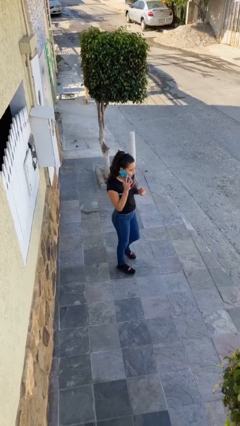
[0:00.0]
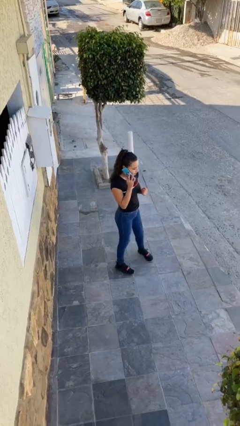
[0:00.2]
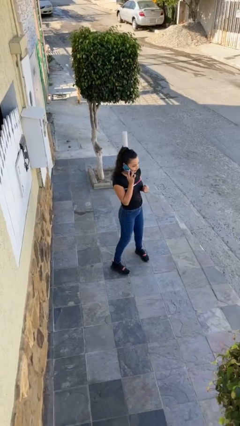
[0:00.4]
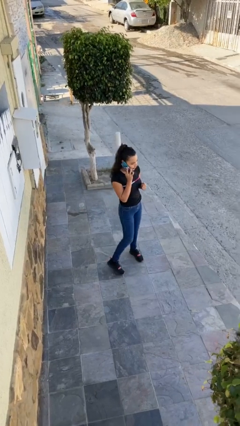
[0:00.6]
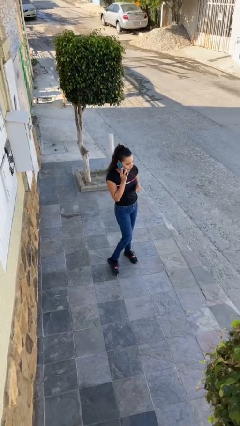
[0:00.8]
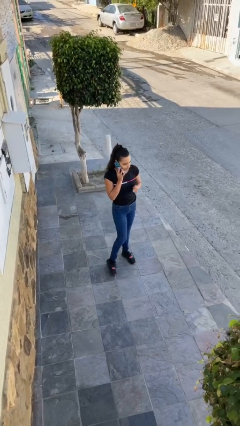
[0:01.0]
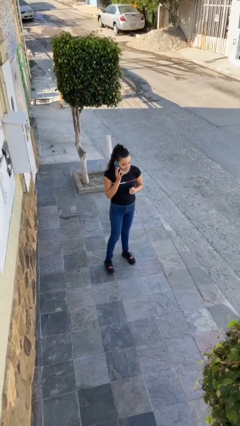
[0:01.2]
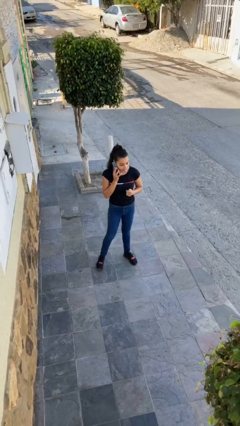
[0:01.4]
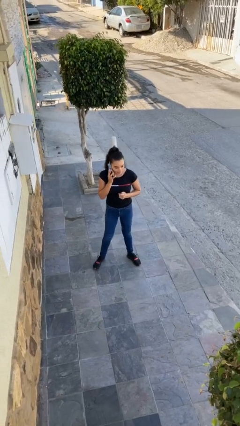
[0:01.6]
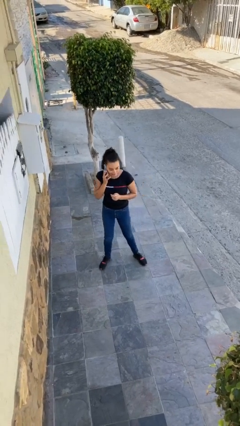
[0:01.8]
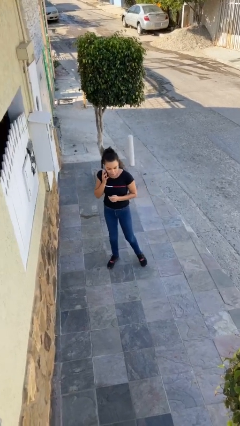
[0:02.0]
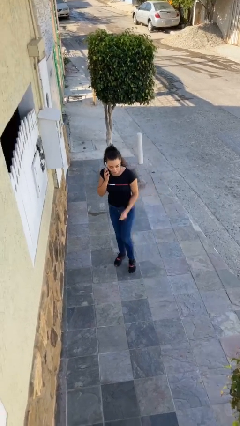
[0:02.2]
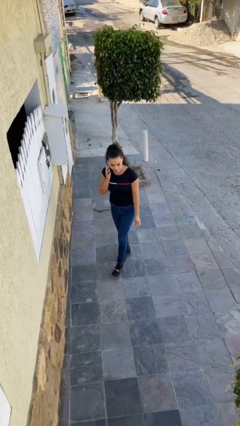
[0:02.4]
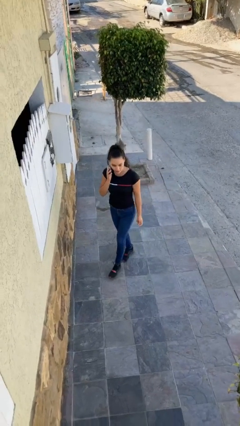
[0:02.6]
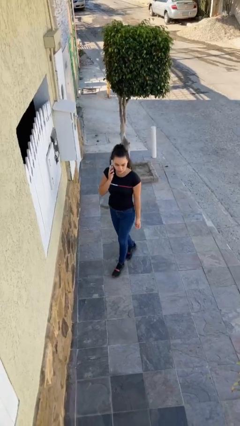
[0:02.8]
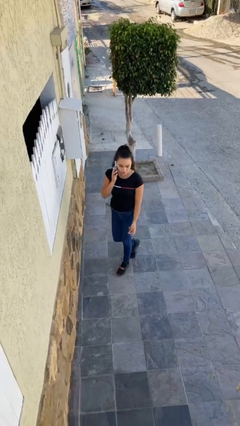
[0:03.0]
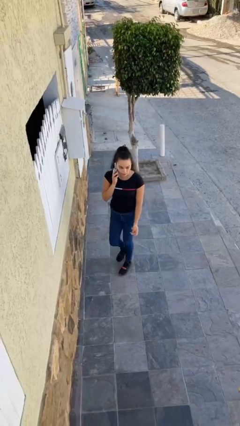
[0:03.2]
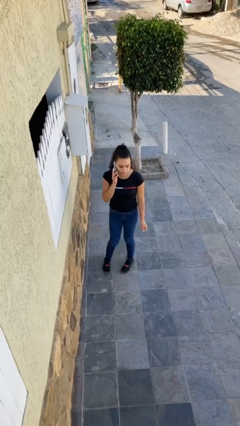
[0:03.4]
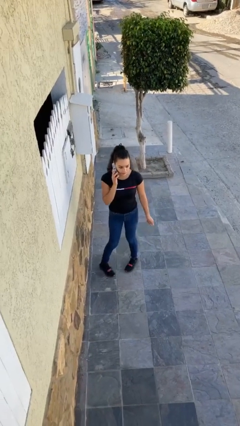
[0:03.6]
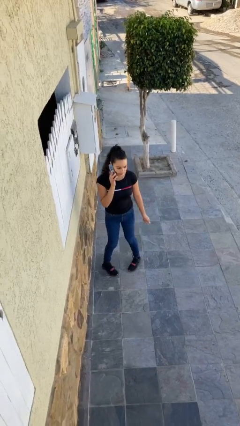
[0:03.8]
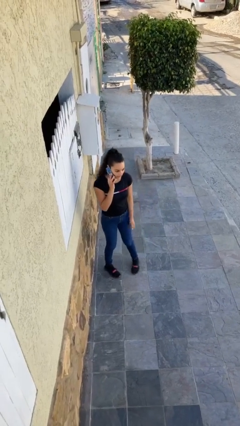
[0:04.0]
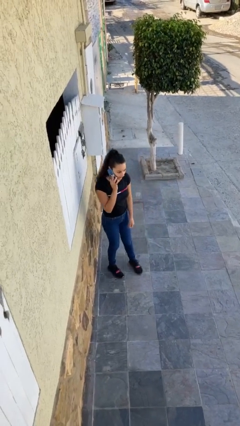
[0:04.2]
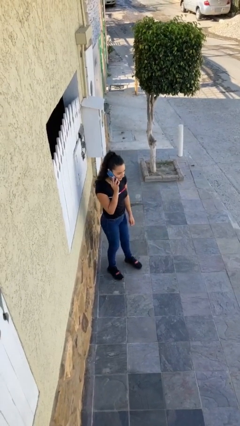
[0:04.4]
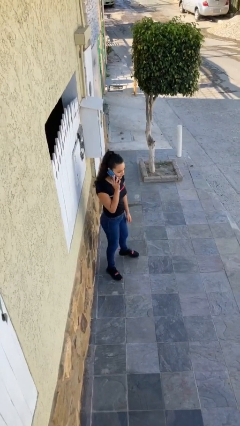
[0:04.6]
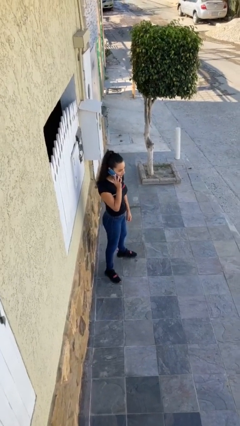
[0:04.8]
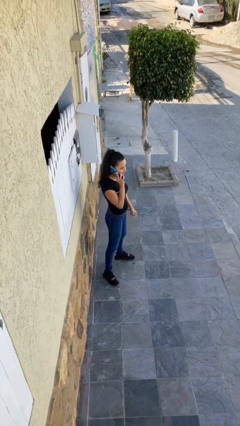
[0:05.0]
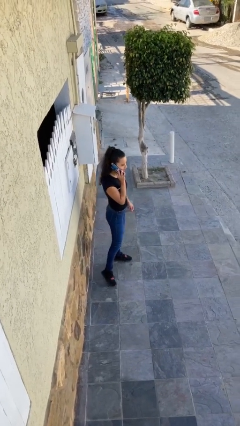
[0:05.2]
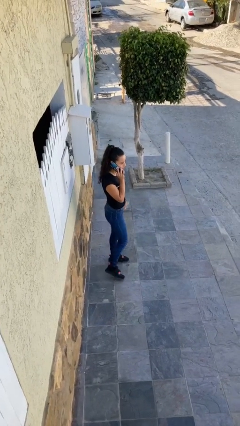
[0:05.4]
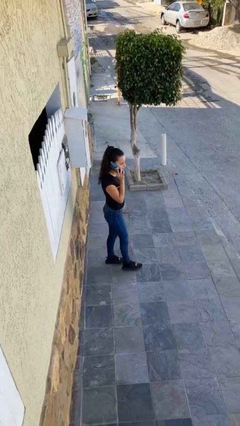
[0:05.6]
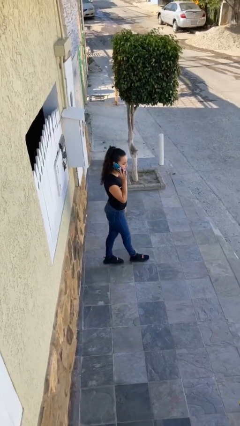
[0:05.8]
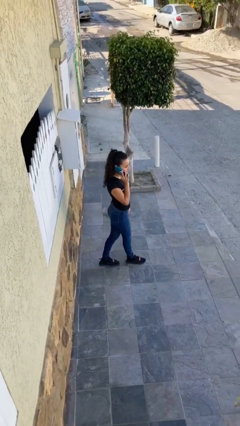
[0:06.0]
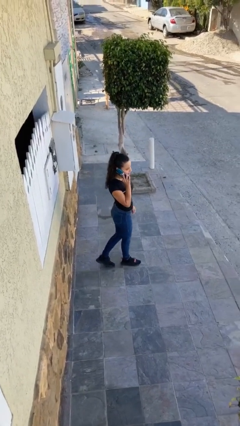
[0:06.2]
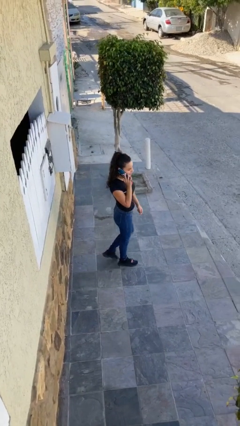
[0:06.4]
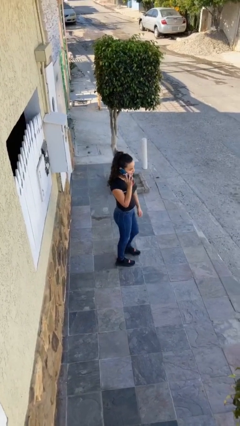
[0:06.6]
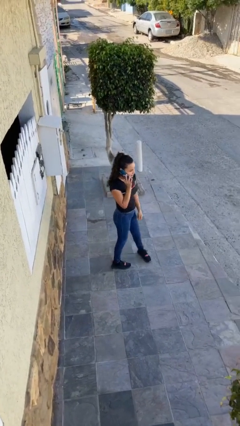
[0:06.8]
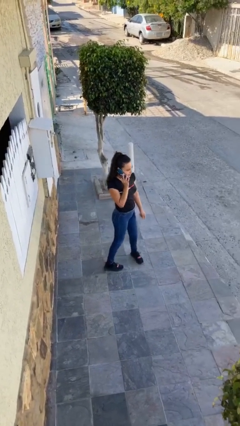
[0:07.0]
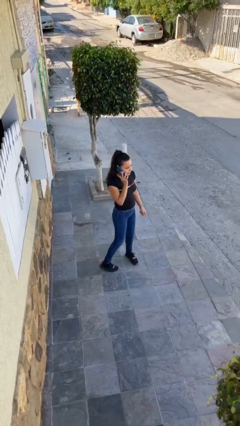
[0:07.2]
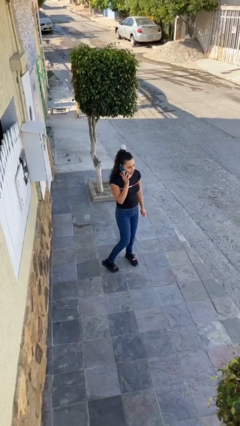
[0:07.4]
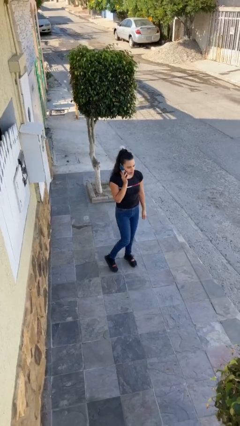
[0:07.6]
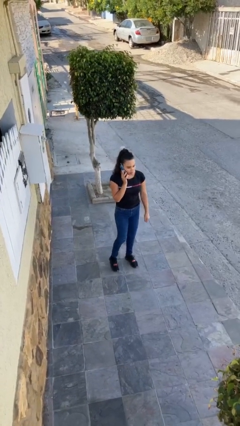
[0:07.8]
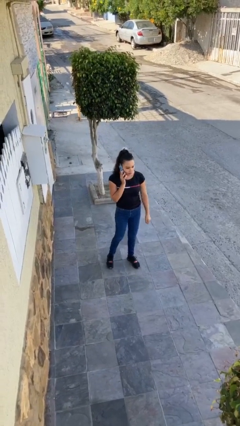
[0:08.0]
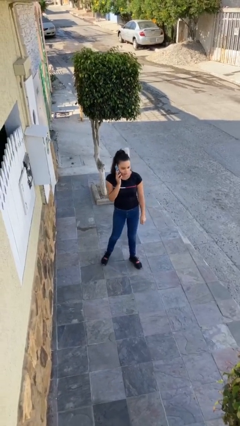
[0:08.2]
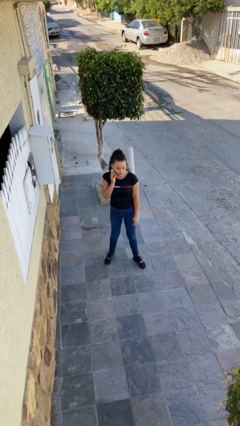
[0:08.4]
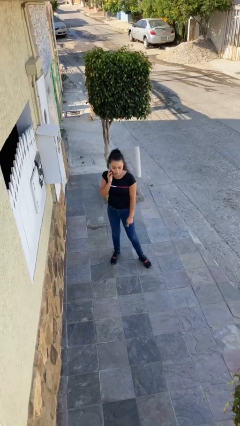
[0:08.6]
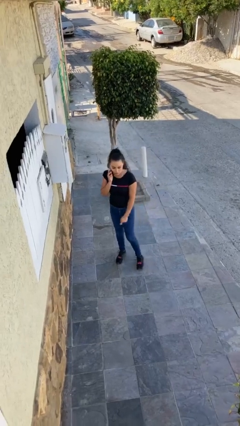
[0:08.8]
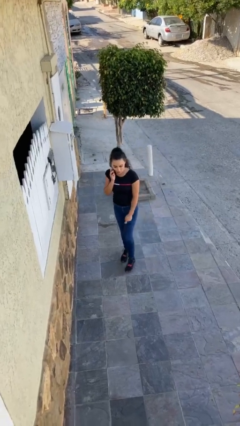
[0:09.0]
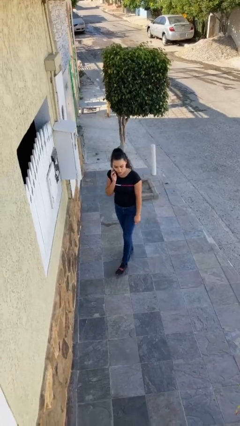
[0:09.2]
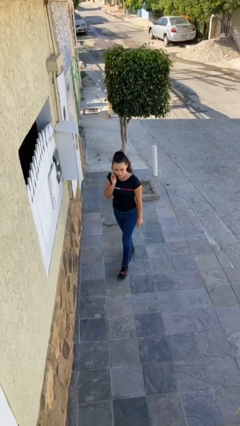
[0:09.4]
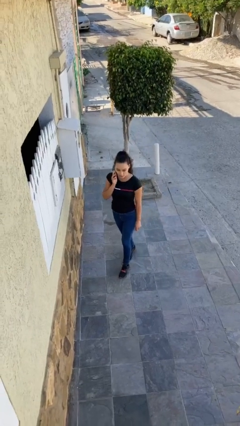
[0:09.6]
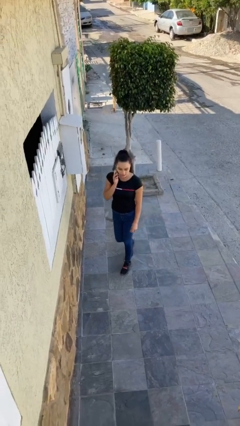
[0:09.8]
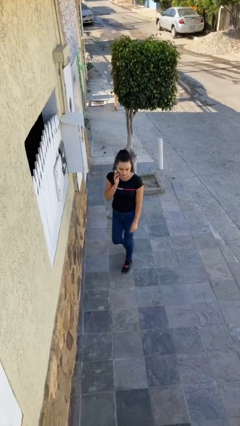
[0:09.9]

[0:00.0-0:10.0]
person talks on phone

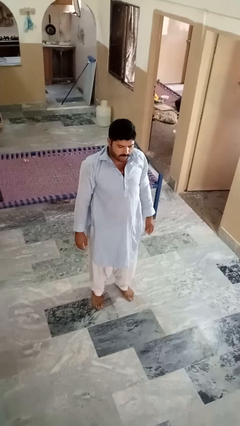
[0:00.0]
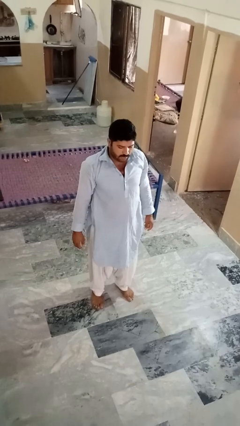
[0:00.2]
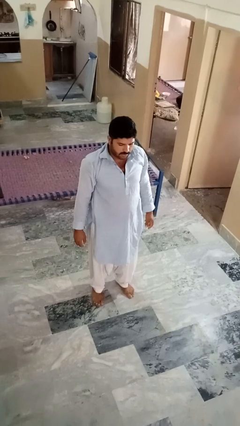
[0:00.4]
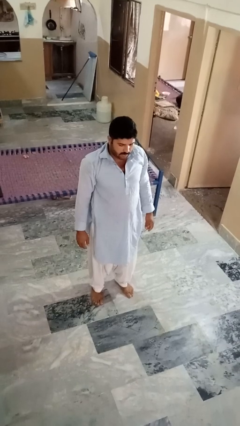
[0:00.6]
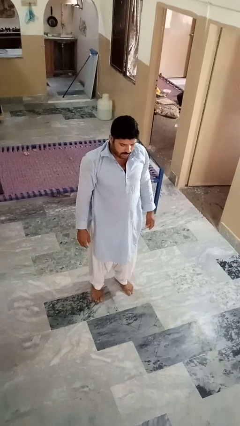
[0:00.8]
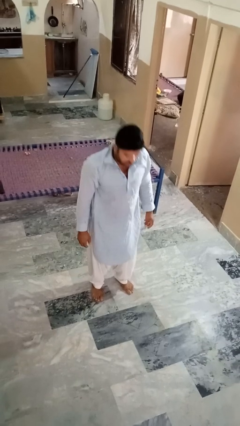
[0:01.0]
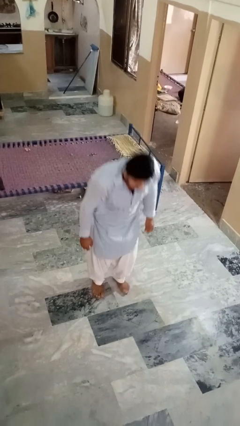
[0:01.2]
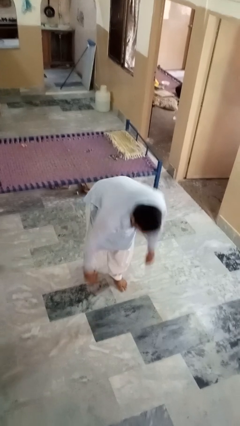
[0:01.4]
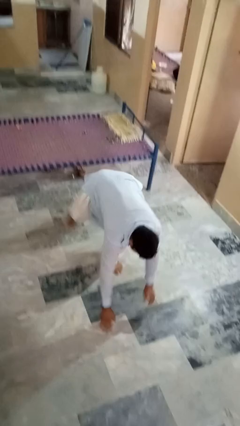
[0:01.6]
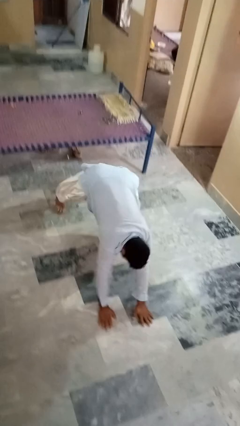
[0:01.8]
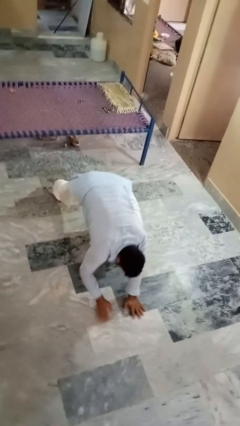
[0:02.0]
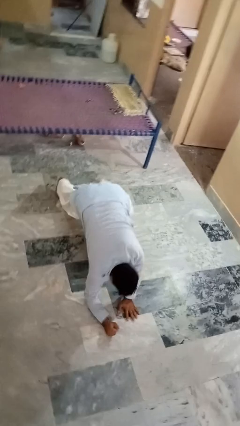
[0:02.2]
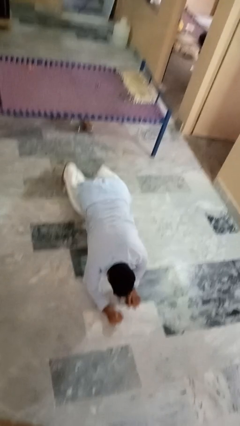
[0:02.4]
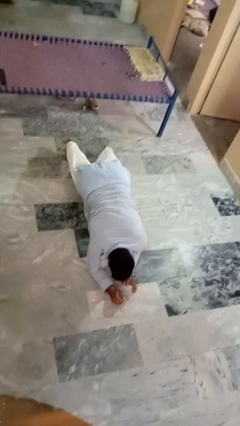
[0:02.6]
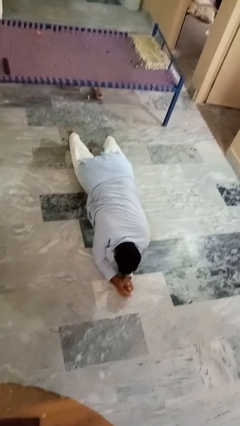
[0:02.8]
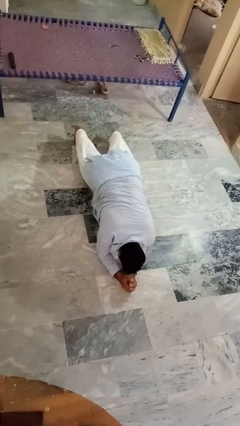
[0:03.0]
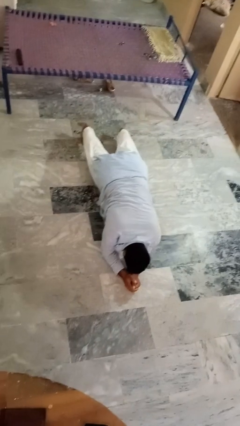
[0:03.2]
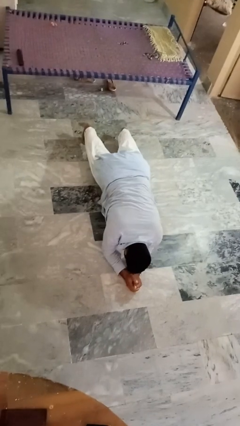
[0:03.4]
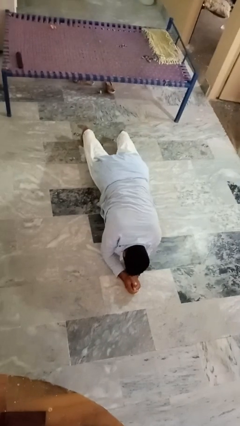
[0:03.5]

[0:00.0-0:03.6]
person exercises with plank

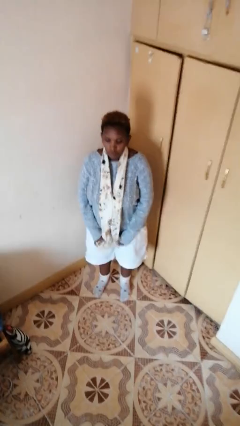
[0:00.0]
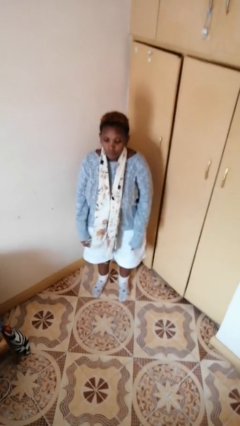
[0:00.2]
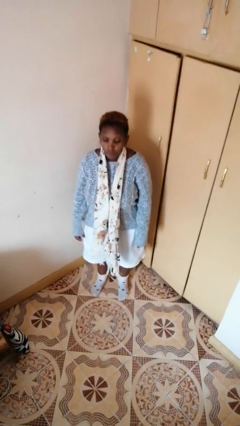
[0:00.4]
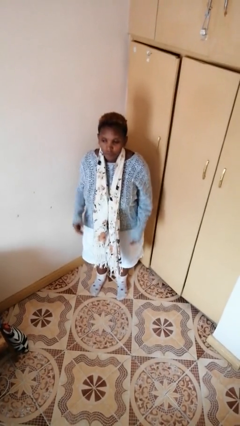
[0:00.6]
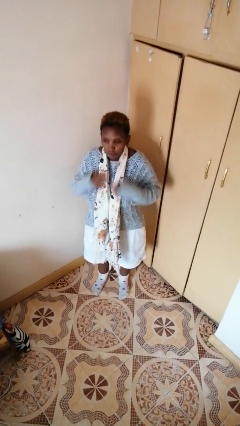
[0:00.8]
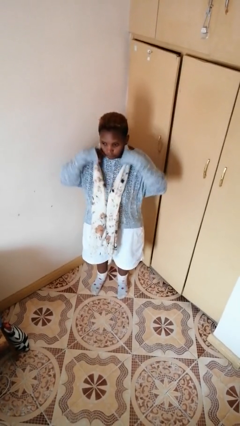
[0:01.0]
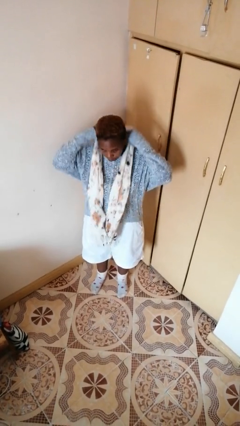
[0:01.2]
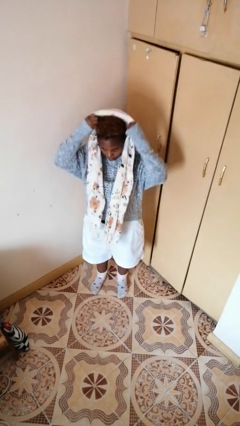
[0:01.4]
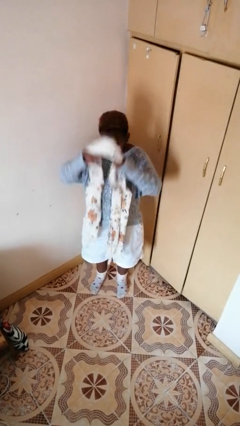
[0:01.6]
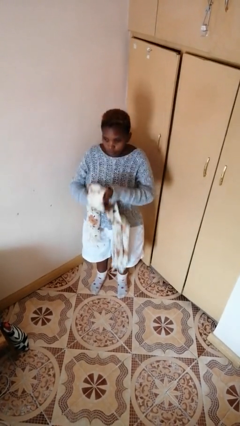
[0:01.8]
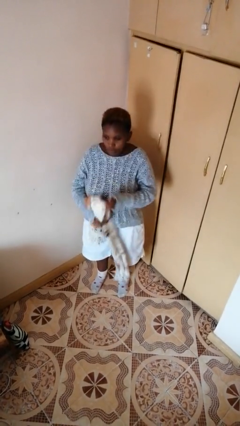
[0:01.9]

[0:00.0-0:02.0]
person takes off scarf

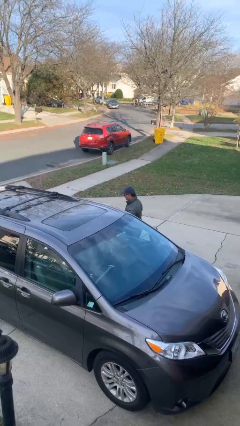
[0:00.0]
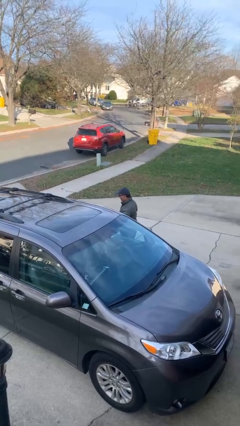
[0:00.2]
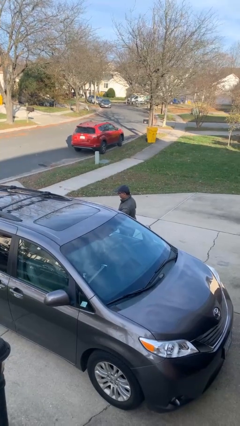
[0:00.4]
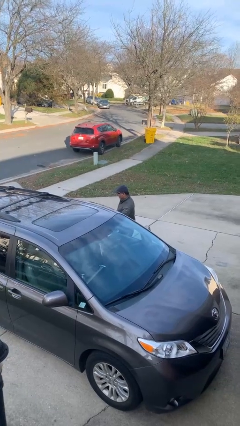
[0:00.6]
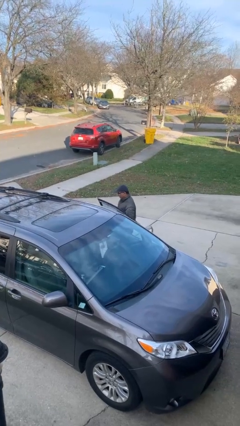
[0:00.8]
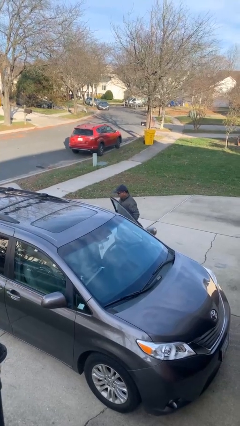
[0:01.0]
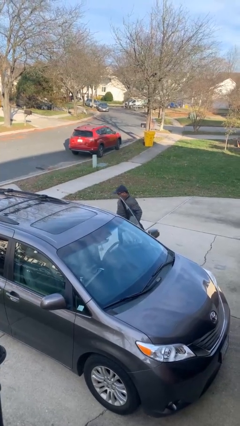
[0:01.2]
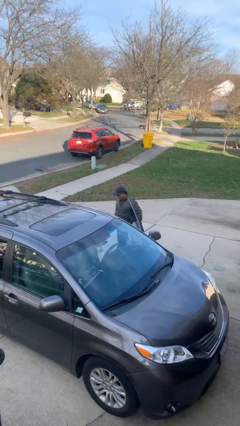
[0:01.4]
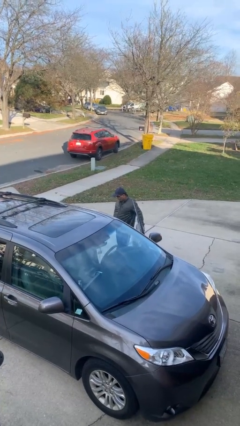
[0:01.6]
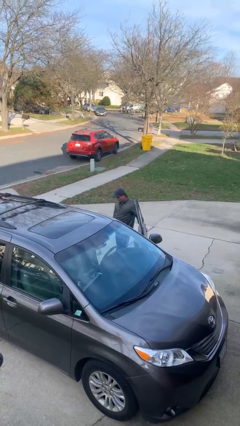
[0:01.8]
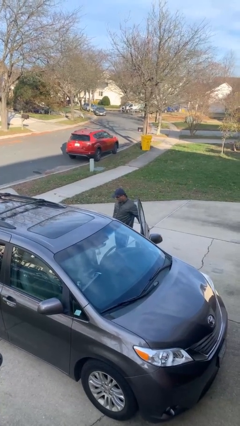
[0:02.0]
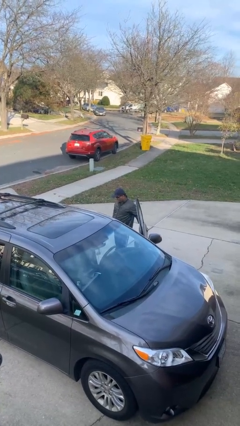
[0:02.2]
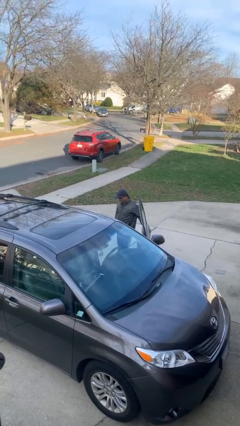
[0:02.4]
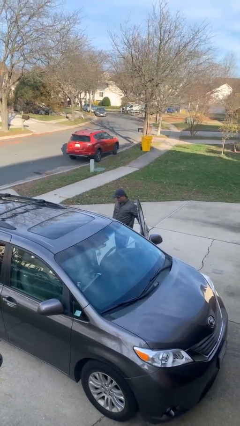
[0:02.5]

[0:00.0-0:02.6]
person opens car door
